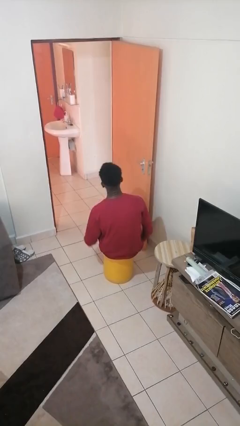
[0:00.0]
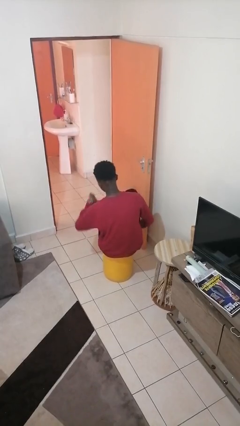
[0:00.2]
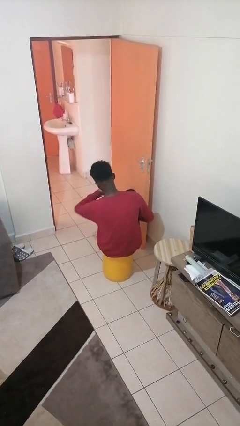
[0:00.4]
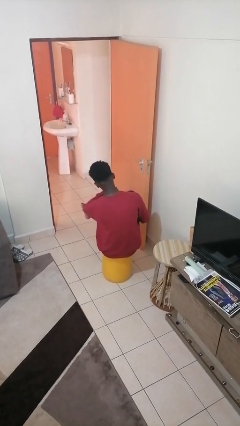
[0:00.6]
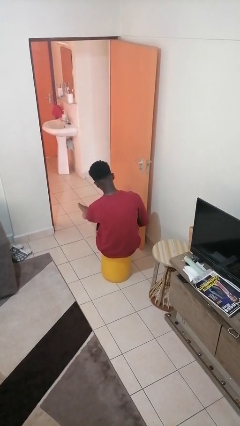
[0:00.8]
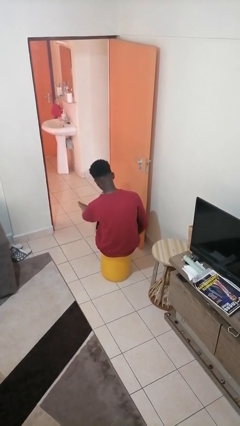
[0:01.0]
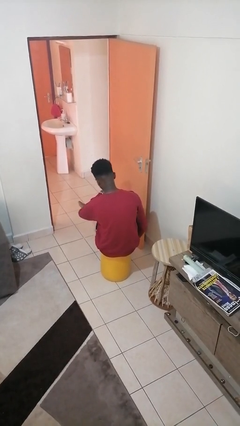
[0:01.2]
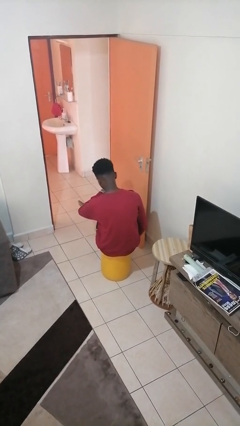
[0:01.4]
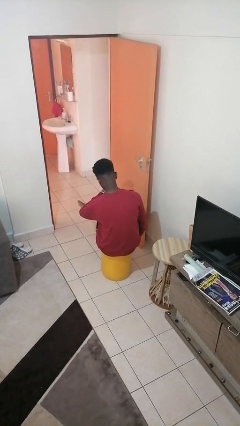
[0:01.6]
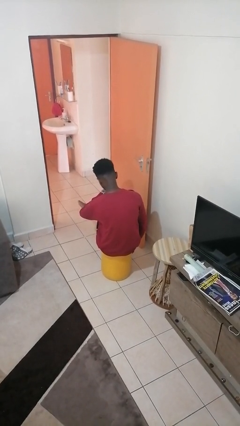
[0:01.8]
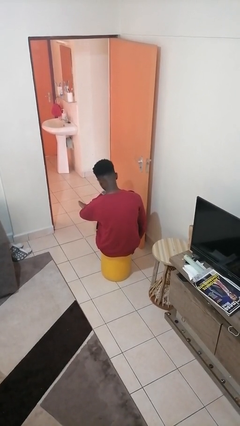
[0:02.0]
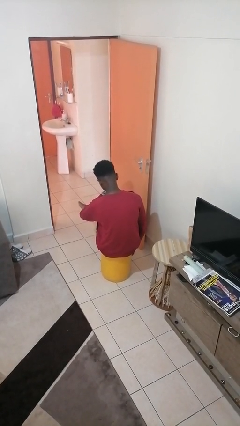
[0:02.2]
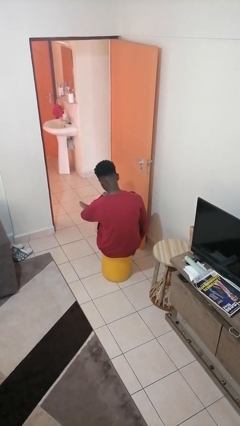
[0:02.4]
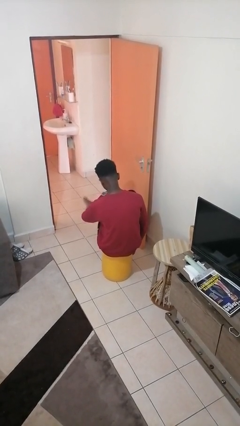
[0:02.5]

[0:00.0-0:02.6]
person looks at wristwatch

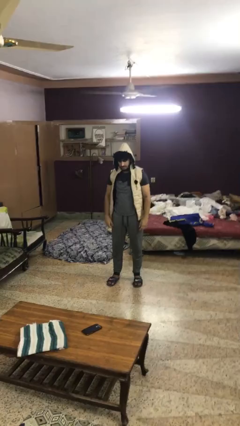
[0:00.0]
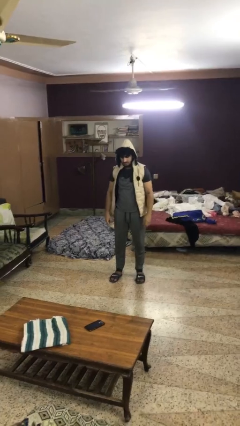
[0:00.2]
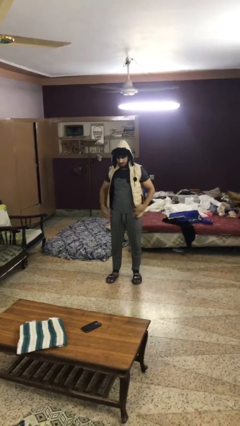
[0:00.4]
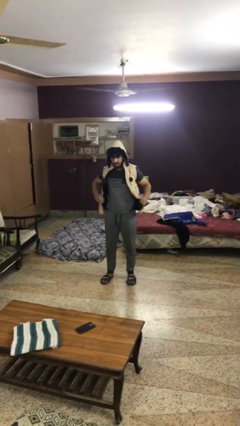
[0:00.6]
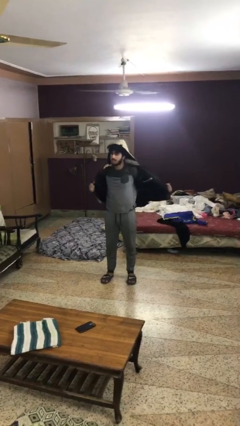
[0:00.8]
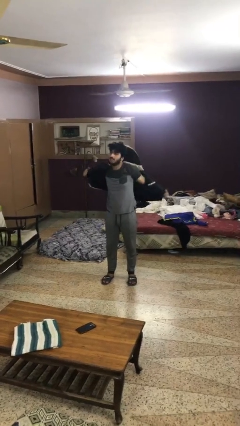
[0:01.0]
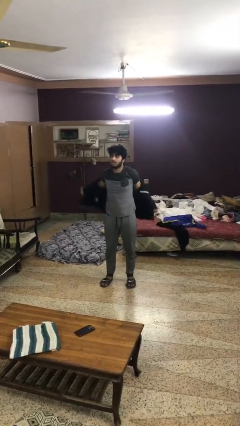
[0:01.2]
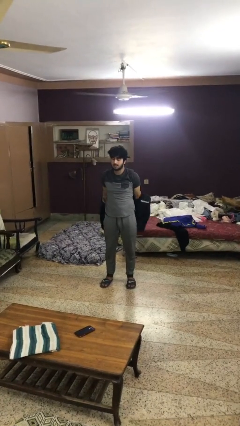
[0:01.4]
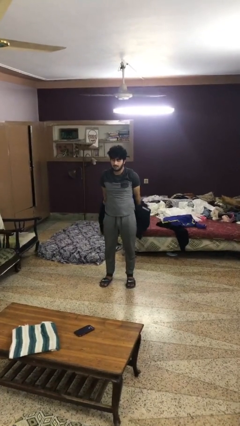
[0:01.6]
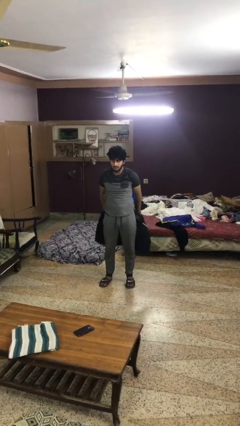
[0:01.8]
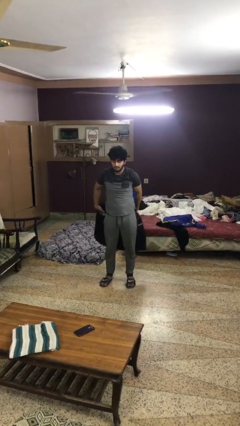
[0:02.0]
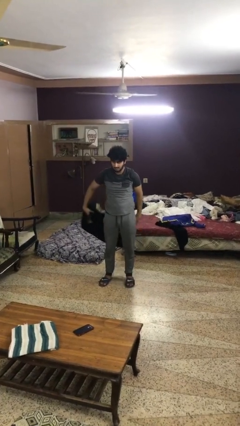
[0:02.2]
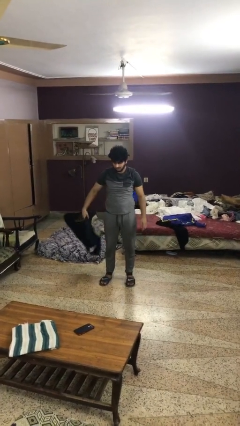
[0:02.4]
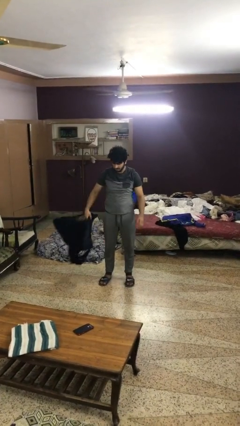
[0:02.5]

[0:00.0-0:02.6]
person takes off hoodie

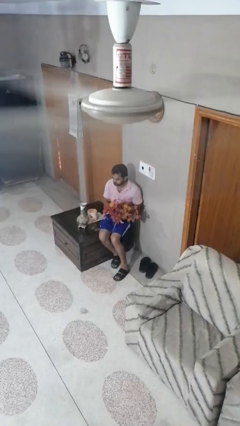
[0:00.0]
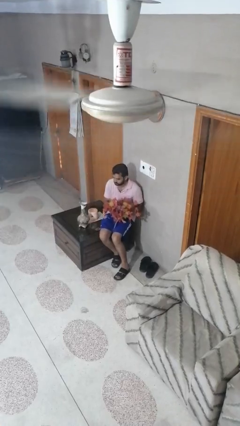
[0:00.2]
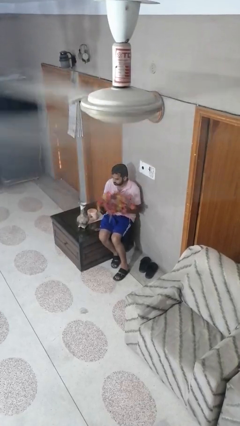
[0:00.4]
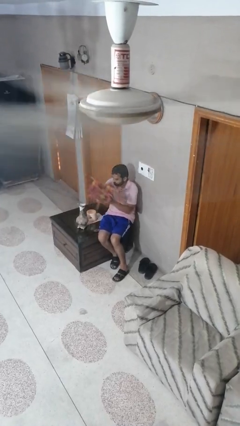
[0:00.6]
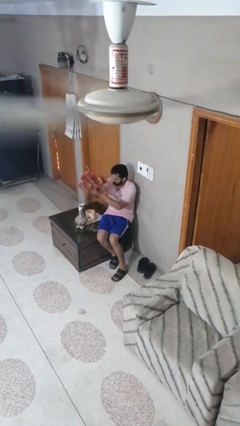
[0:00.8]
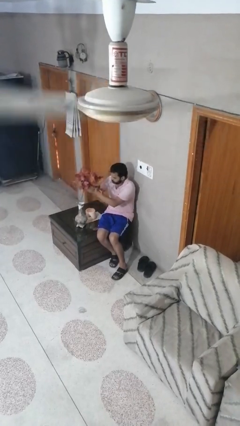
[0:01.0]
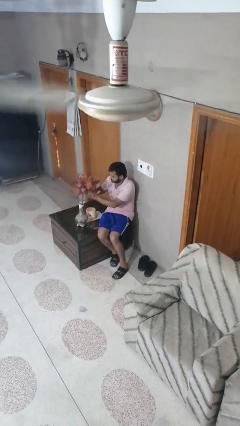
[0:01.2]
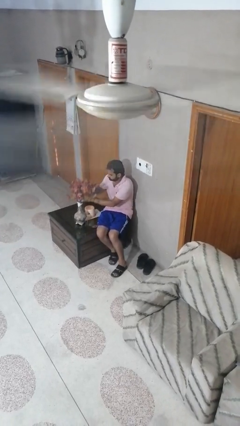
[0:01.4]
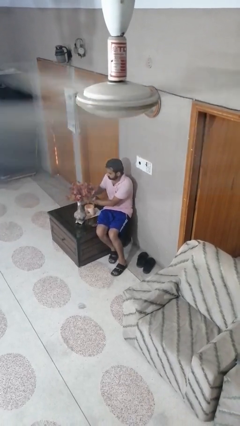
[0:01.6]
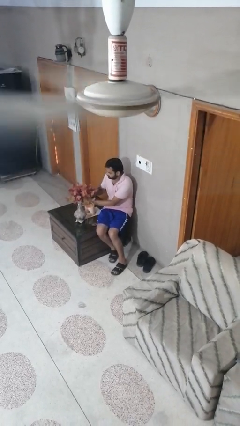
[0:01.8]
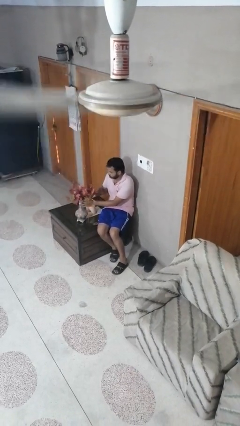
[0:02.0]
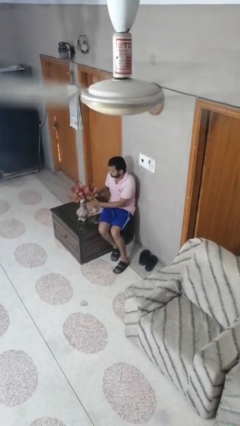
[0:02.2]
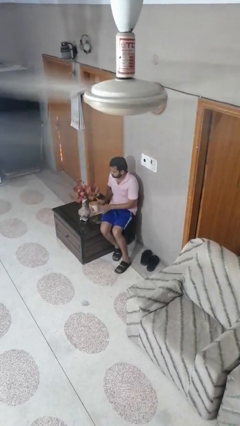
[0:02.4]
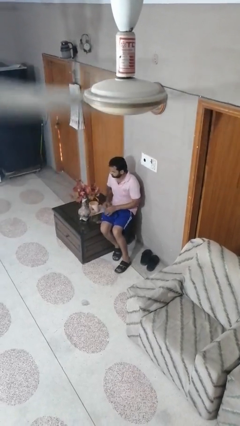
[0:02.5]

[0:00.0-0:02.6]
person arranges flowers in vase

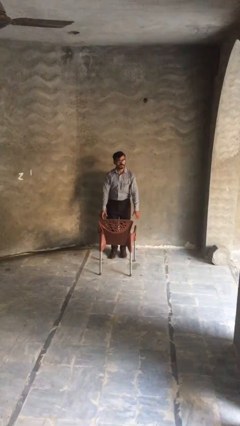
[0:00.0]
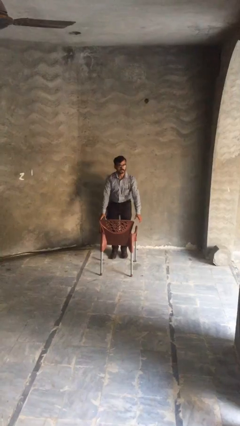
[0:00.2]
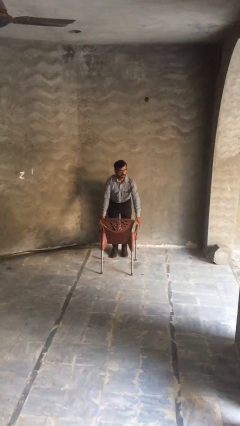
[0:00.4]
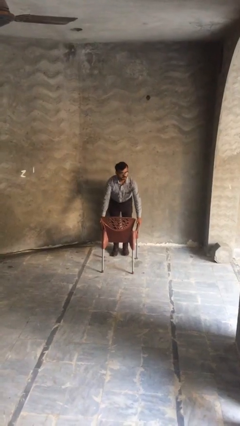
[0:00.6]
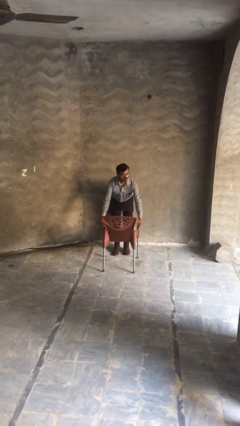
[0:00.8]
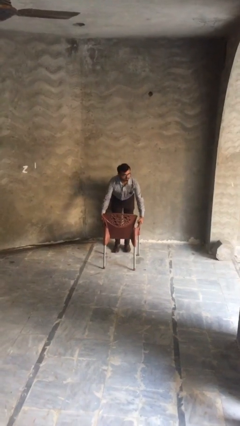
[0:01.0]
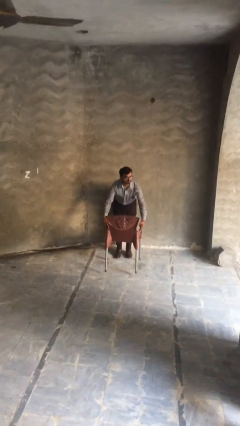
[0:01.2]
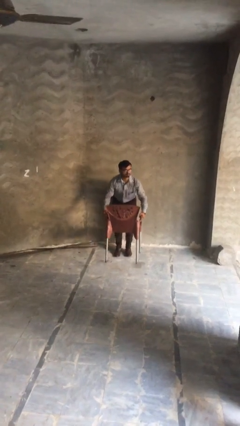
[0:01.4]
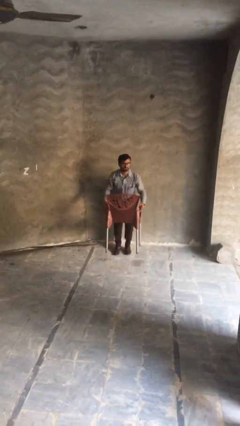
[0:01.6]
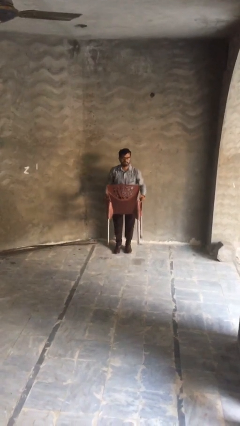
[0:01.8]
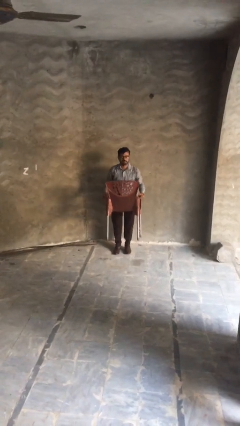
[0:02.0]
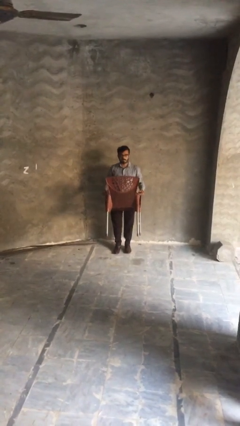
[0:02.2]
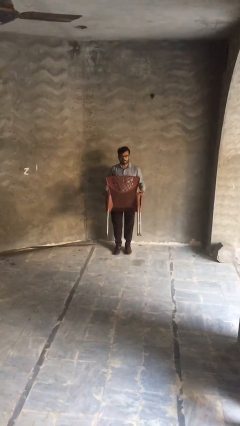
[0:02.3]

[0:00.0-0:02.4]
person picks up object from floor

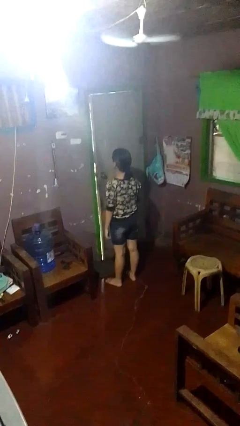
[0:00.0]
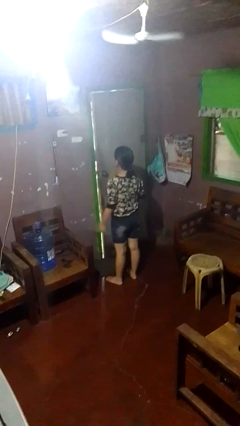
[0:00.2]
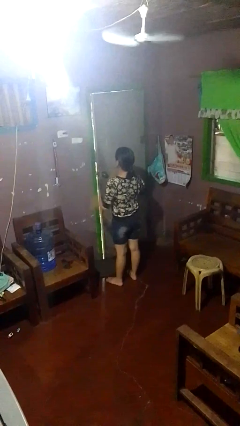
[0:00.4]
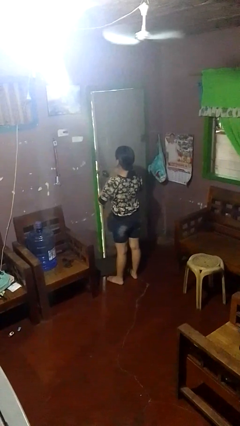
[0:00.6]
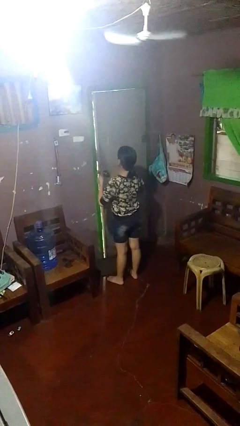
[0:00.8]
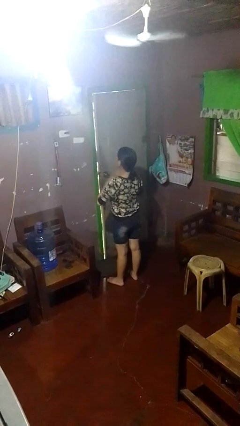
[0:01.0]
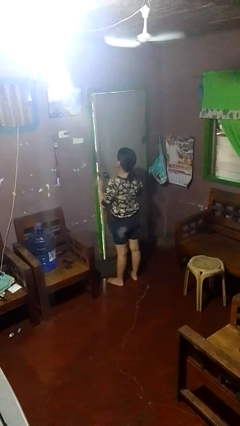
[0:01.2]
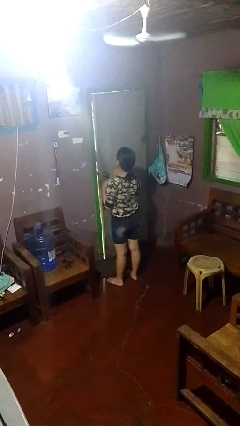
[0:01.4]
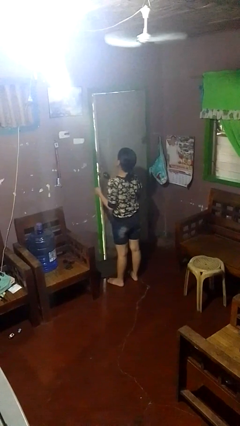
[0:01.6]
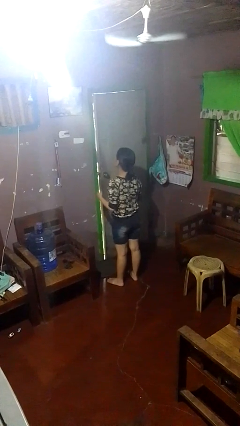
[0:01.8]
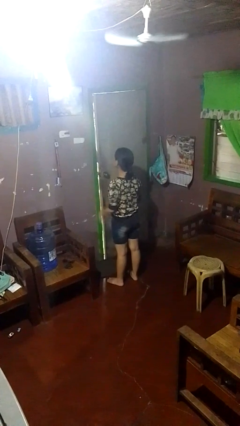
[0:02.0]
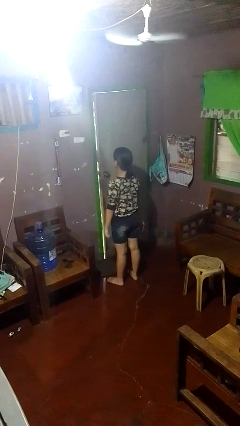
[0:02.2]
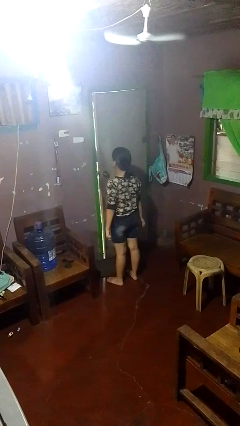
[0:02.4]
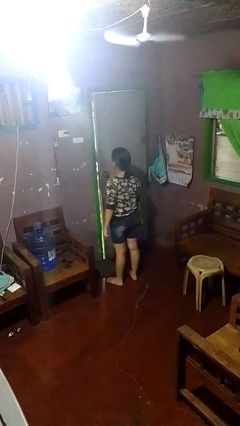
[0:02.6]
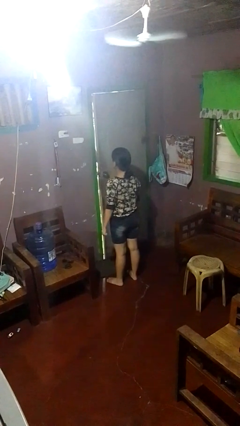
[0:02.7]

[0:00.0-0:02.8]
person drums on chest

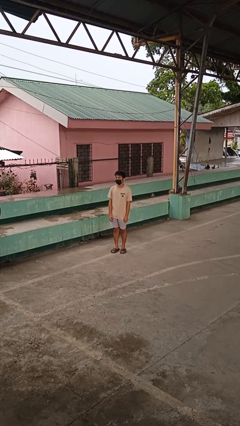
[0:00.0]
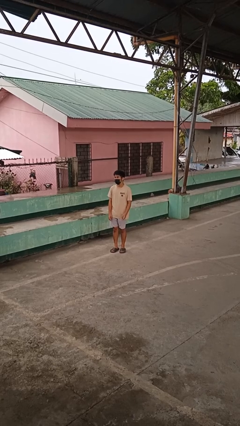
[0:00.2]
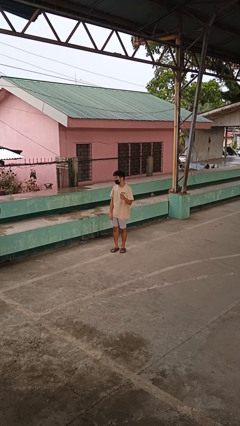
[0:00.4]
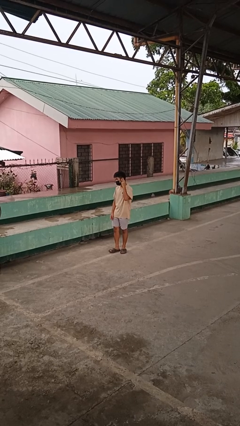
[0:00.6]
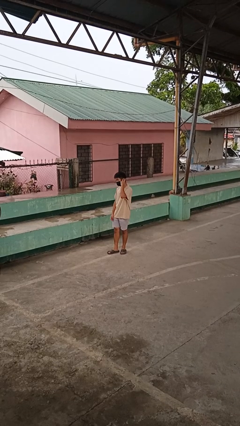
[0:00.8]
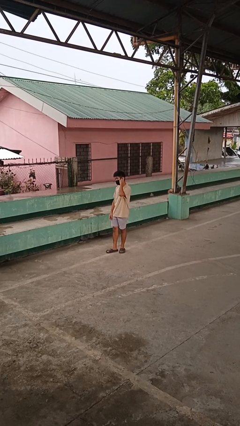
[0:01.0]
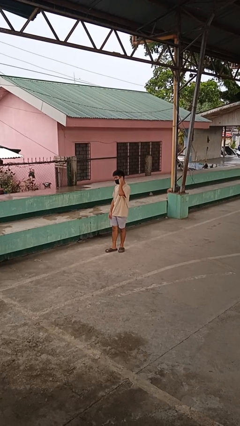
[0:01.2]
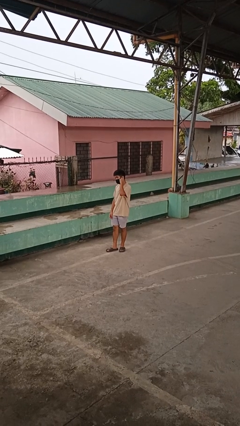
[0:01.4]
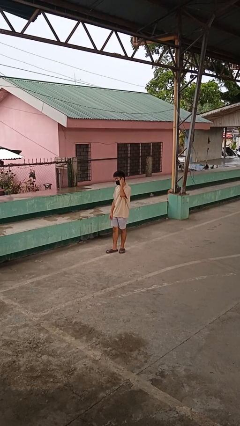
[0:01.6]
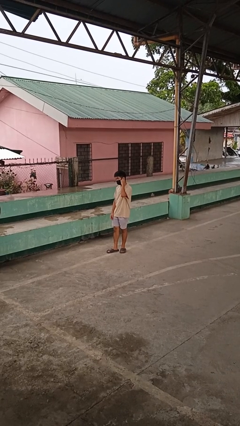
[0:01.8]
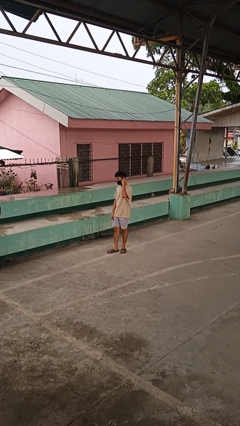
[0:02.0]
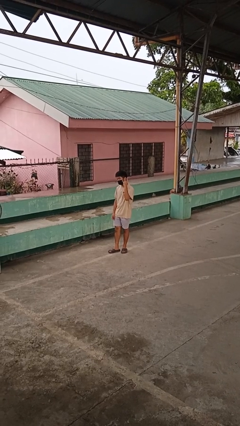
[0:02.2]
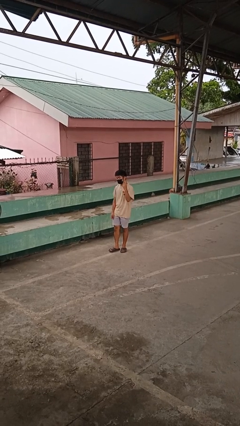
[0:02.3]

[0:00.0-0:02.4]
person gestures listen closely

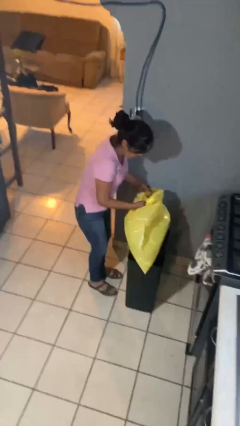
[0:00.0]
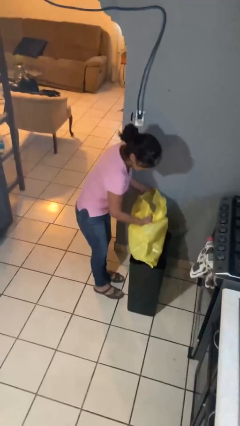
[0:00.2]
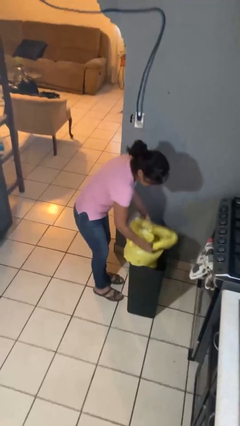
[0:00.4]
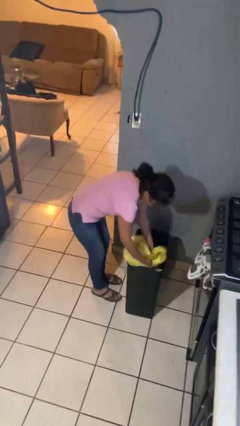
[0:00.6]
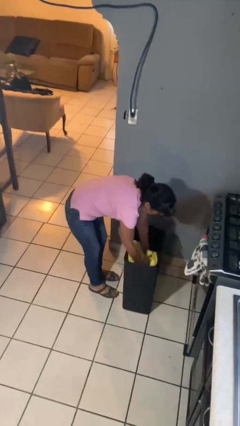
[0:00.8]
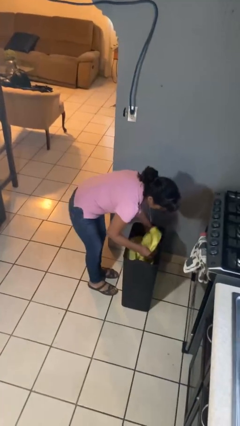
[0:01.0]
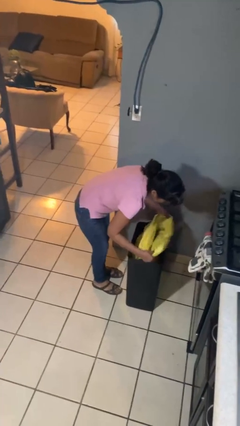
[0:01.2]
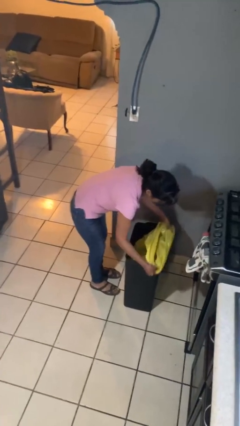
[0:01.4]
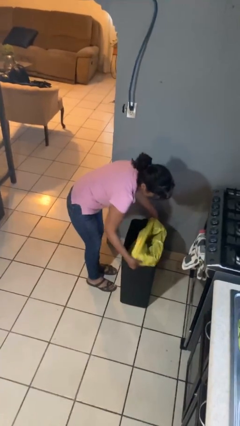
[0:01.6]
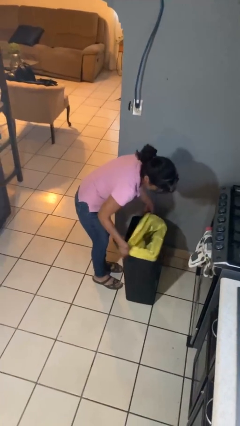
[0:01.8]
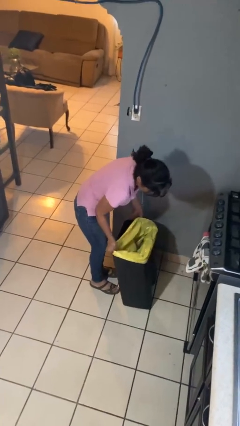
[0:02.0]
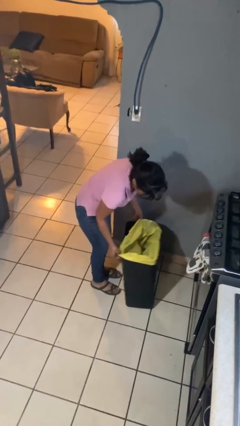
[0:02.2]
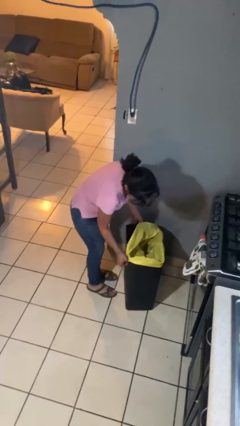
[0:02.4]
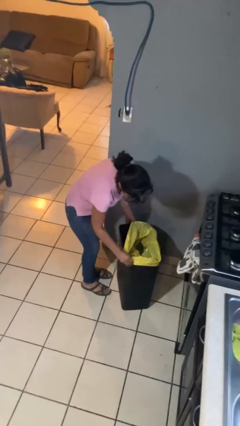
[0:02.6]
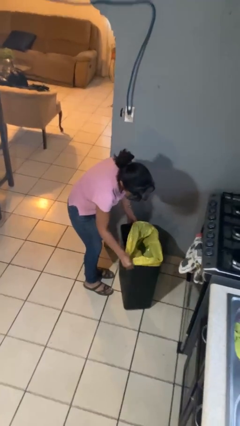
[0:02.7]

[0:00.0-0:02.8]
person inserts trashbag into trashcan
